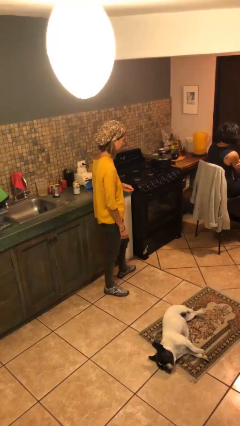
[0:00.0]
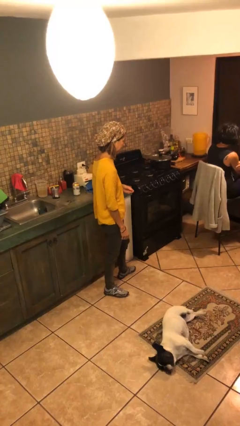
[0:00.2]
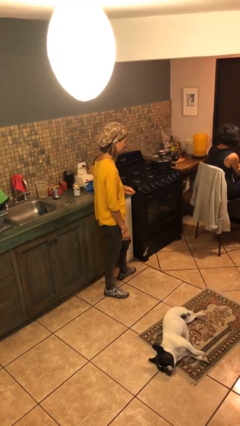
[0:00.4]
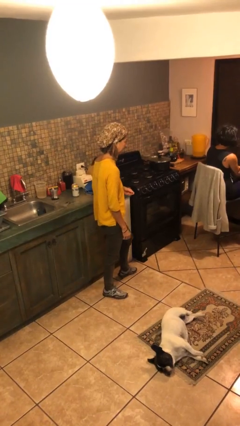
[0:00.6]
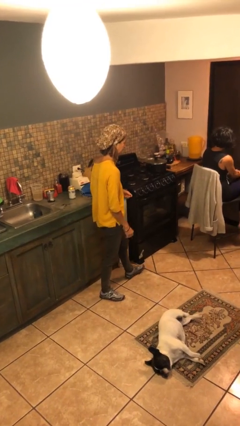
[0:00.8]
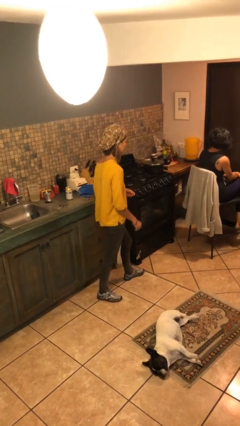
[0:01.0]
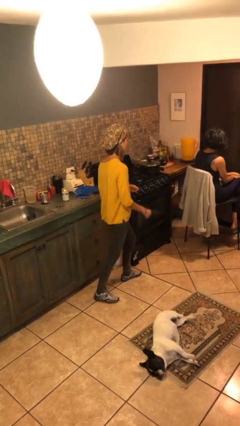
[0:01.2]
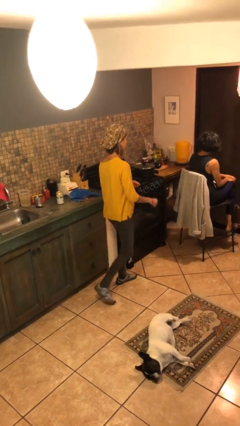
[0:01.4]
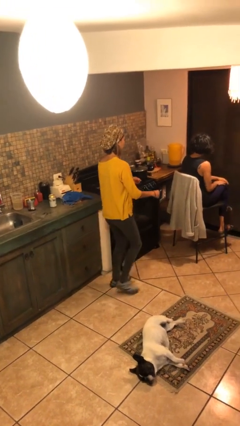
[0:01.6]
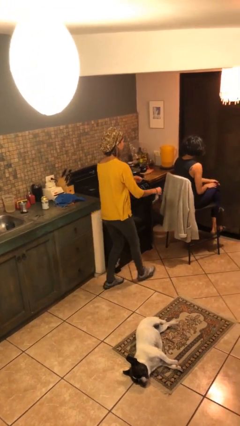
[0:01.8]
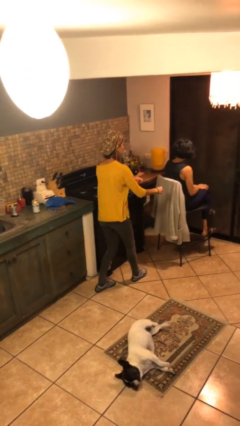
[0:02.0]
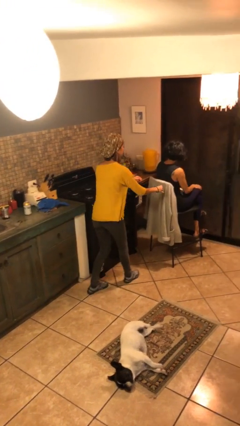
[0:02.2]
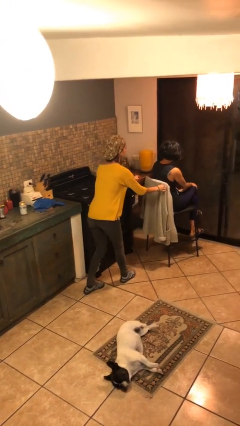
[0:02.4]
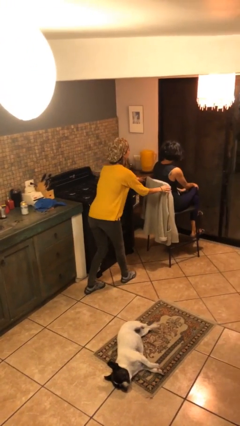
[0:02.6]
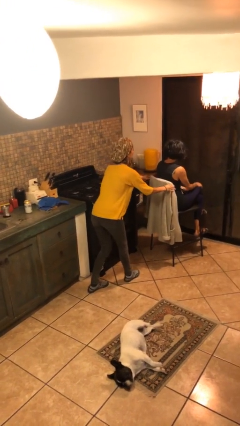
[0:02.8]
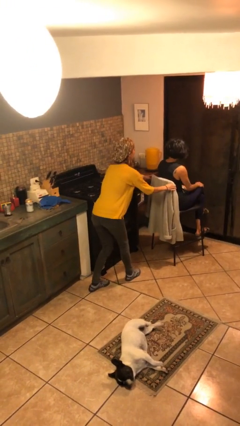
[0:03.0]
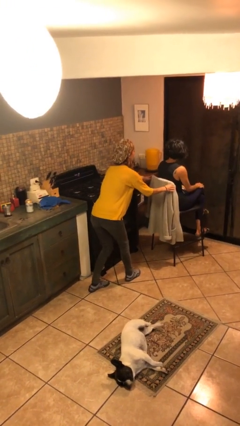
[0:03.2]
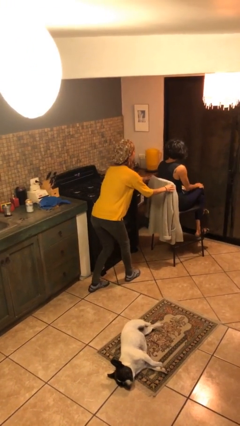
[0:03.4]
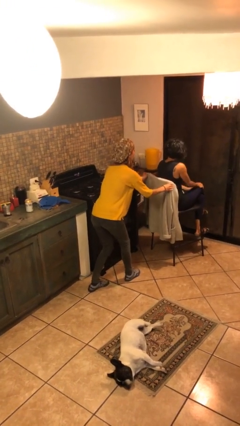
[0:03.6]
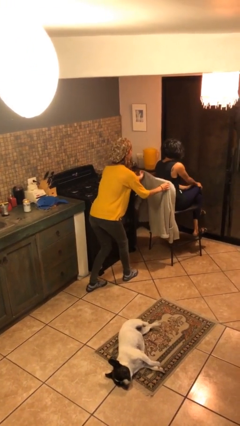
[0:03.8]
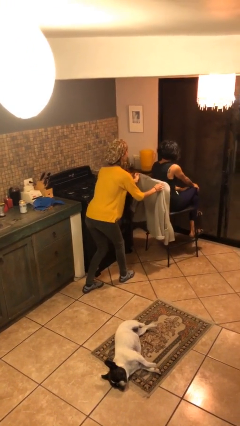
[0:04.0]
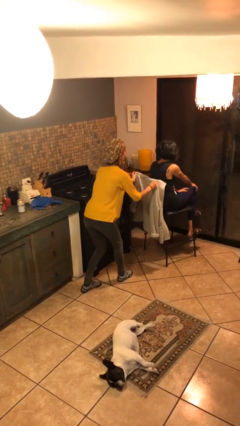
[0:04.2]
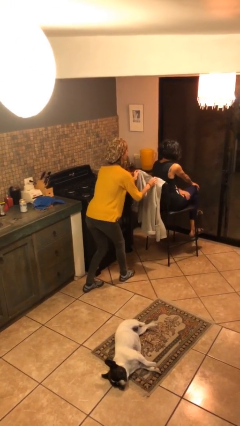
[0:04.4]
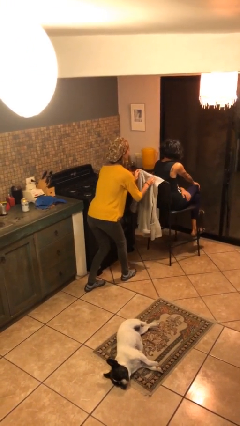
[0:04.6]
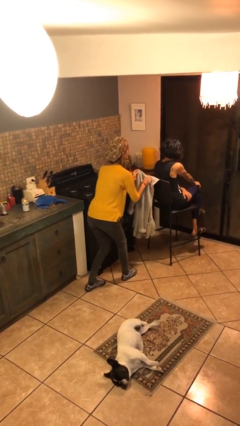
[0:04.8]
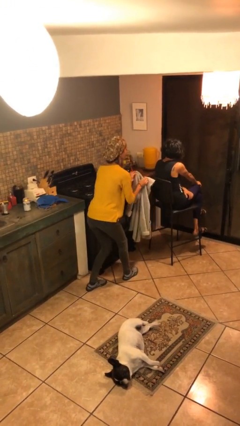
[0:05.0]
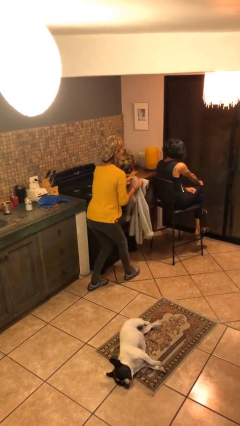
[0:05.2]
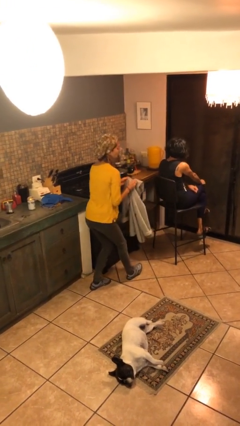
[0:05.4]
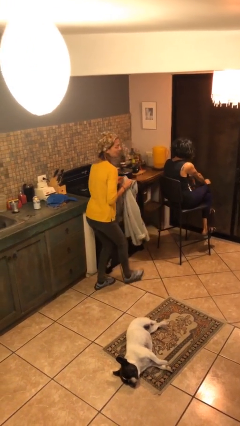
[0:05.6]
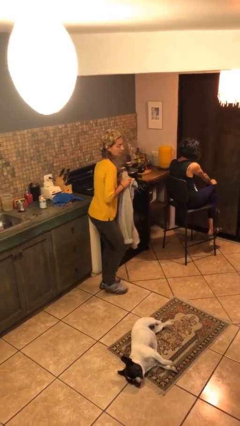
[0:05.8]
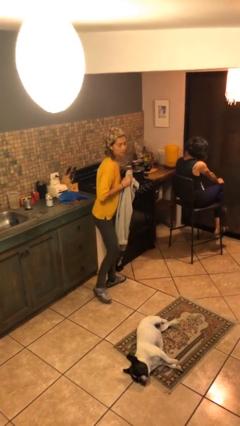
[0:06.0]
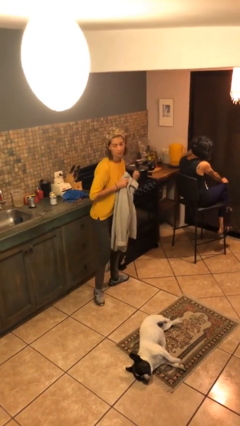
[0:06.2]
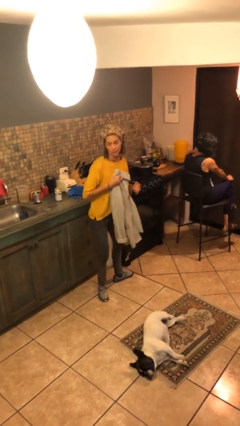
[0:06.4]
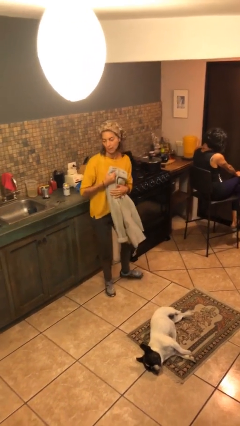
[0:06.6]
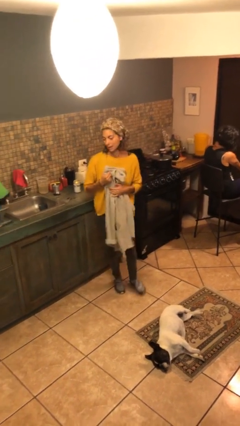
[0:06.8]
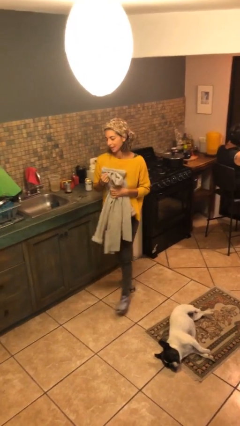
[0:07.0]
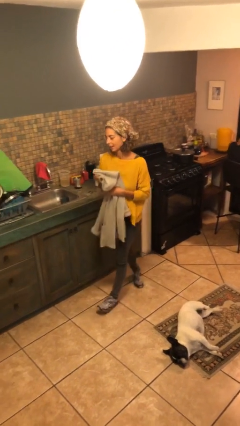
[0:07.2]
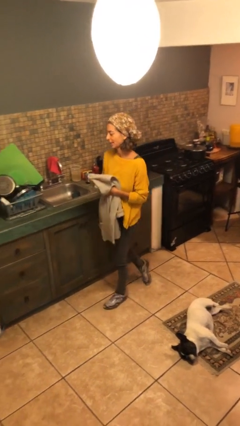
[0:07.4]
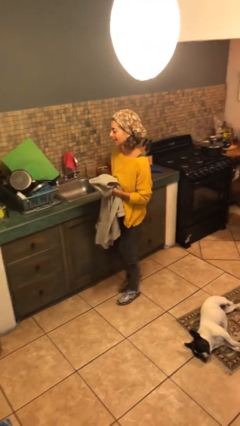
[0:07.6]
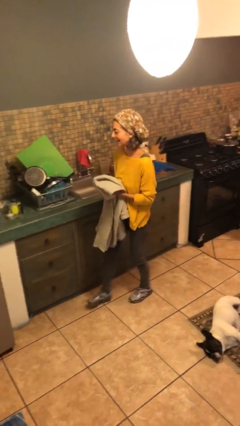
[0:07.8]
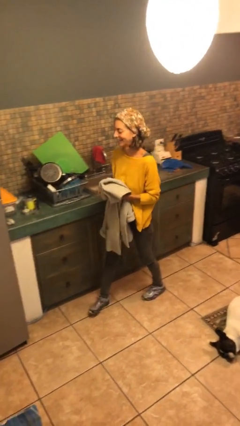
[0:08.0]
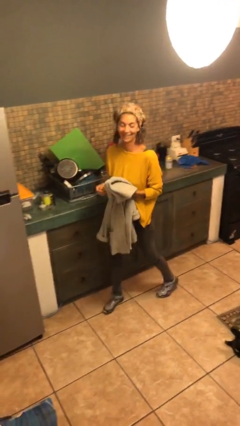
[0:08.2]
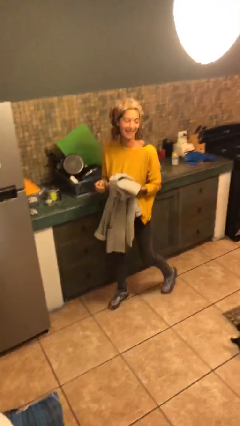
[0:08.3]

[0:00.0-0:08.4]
person steals object from person

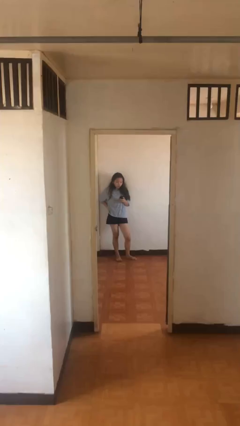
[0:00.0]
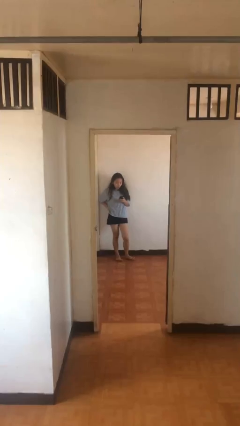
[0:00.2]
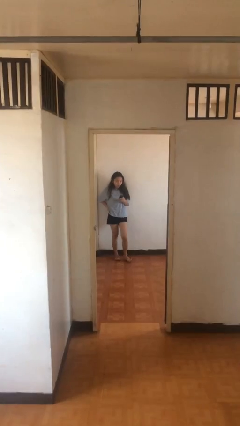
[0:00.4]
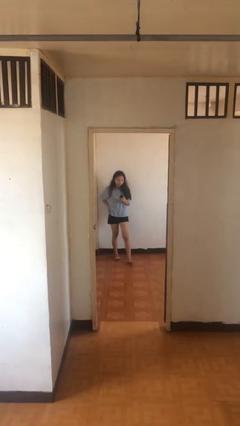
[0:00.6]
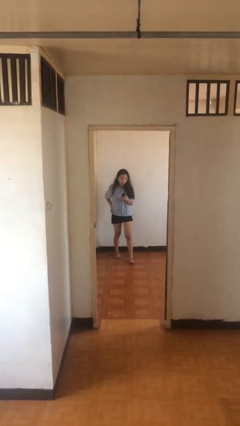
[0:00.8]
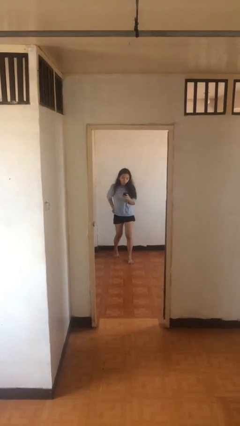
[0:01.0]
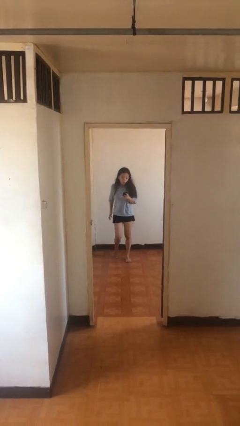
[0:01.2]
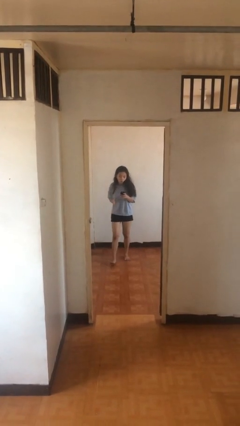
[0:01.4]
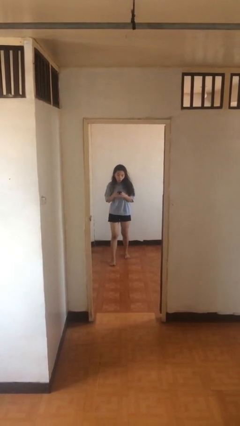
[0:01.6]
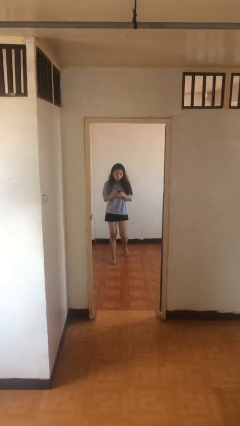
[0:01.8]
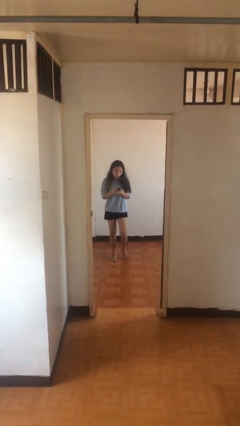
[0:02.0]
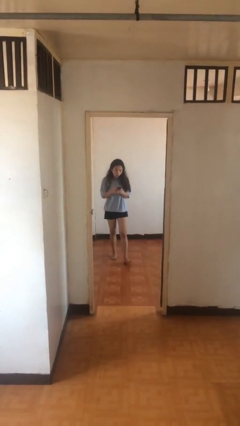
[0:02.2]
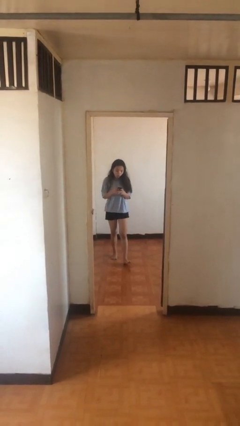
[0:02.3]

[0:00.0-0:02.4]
person texts on phone

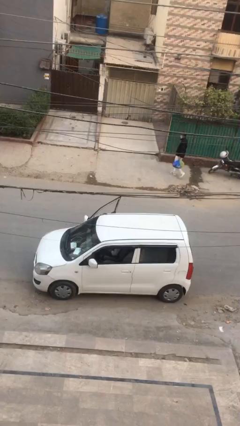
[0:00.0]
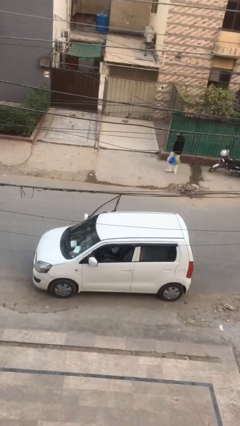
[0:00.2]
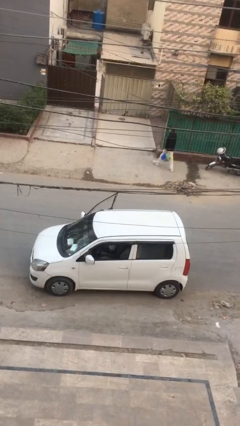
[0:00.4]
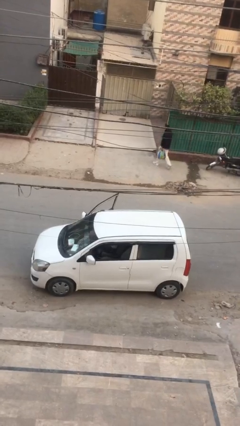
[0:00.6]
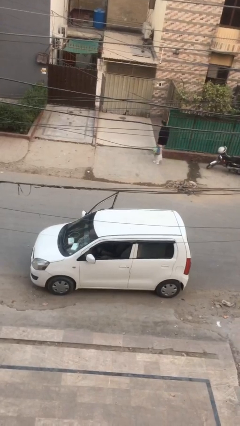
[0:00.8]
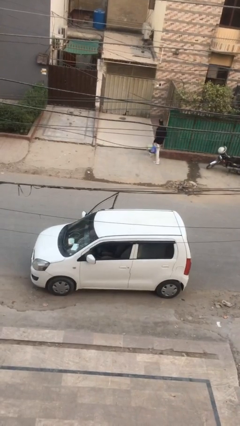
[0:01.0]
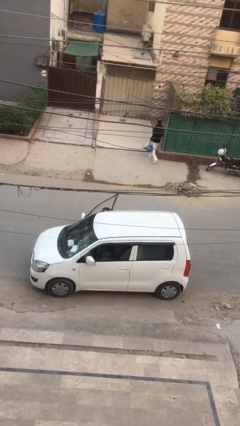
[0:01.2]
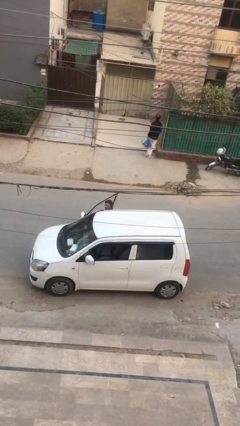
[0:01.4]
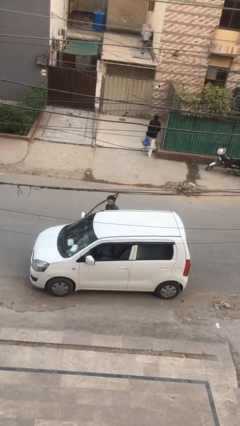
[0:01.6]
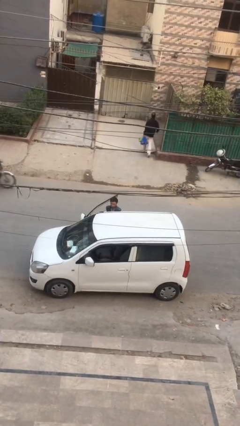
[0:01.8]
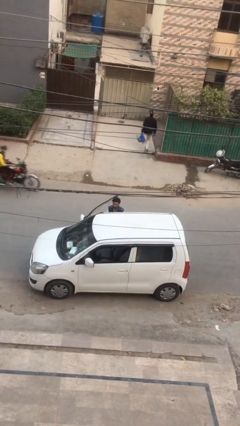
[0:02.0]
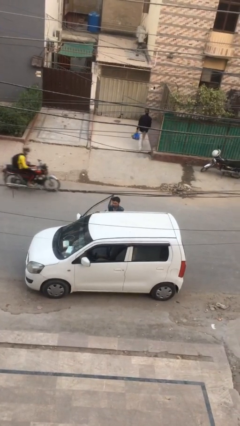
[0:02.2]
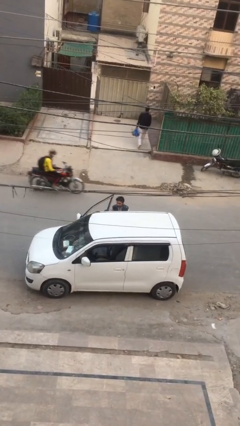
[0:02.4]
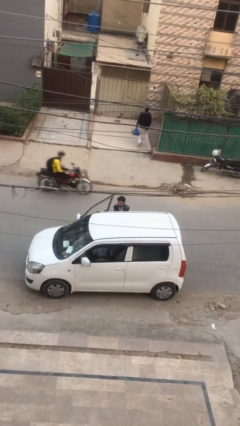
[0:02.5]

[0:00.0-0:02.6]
person exits car

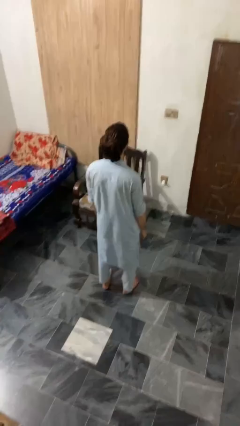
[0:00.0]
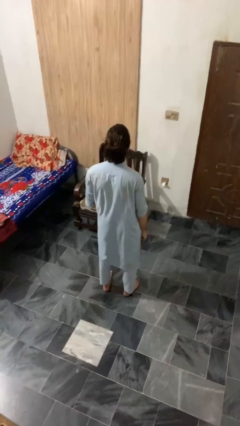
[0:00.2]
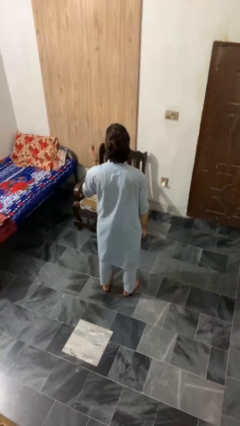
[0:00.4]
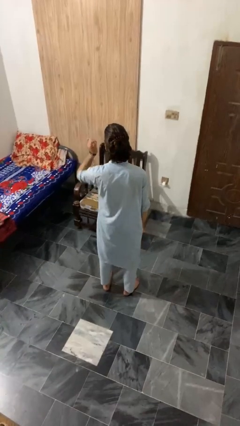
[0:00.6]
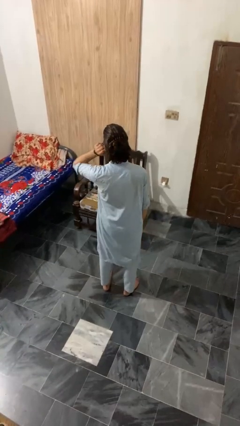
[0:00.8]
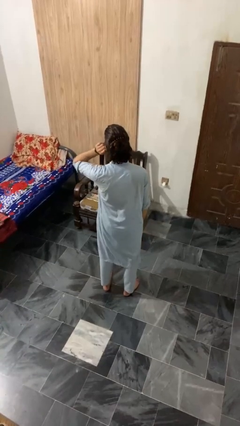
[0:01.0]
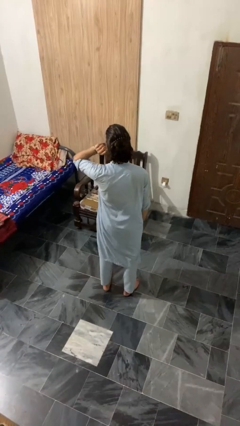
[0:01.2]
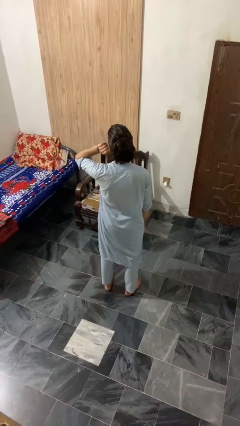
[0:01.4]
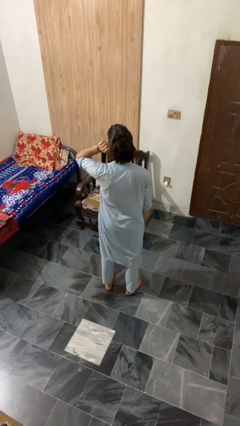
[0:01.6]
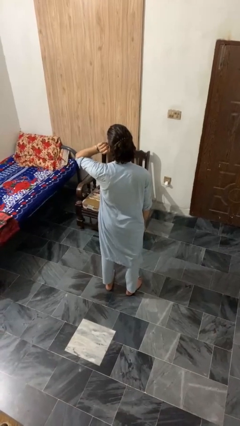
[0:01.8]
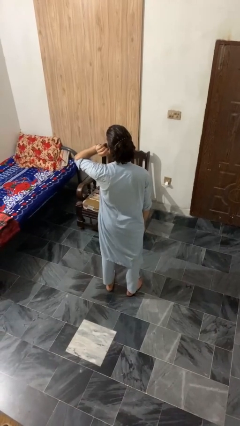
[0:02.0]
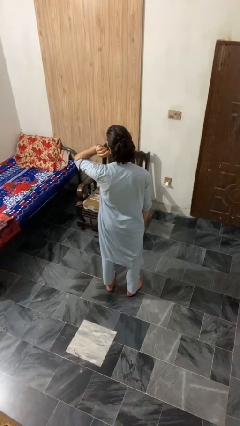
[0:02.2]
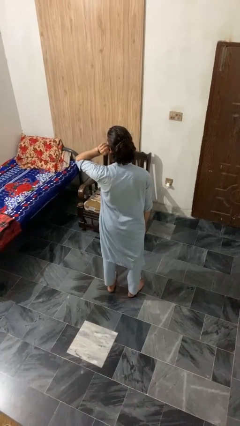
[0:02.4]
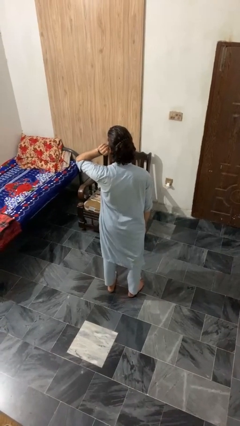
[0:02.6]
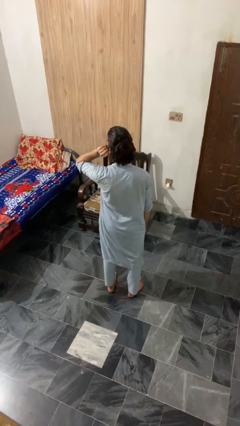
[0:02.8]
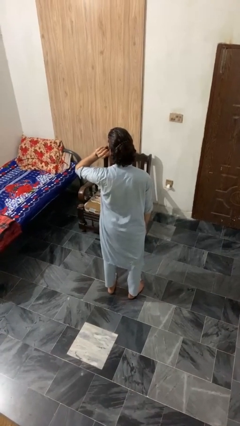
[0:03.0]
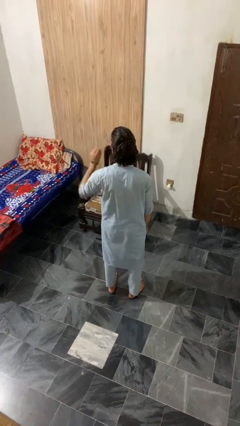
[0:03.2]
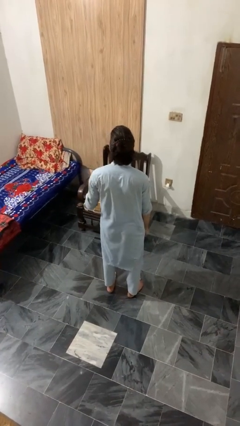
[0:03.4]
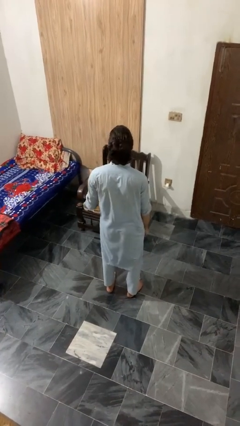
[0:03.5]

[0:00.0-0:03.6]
person touches earlobe

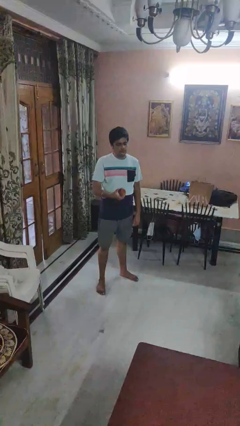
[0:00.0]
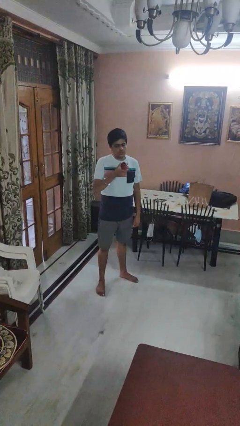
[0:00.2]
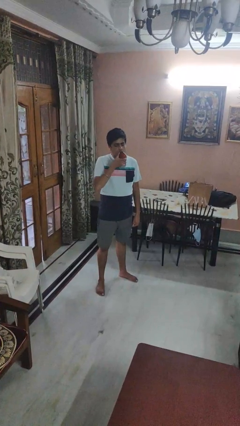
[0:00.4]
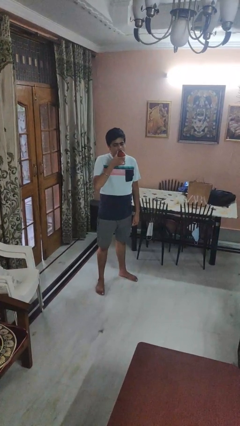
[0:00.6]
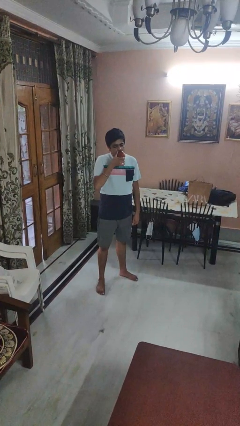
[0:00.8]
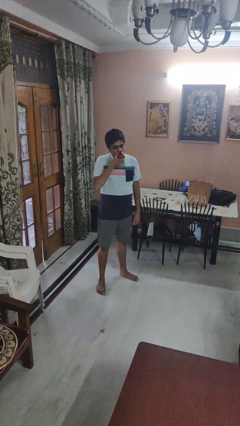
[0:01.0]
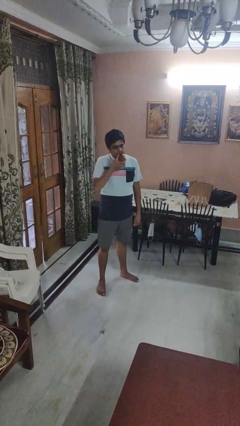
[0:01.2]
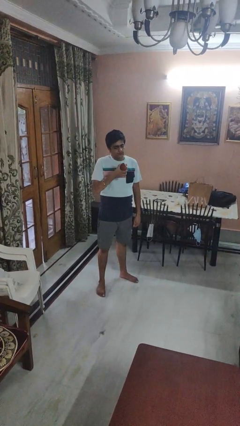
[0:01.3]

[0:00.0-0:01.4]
person eats apple
